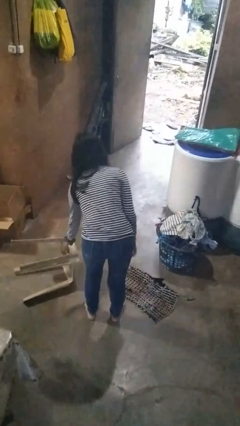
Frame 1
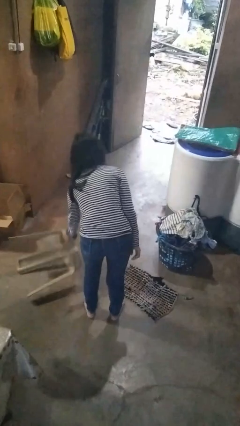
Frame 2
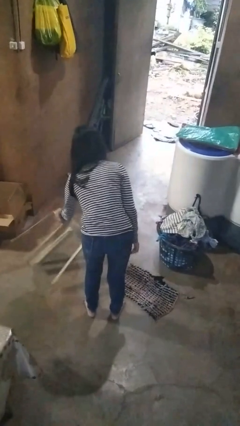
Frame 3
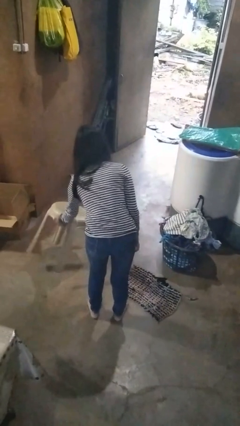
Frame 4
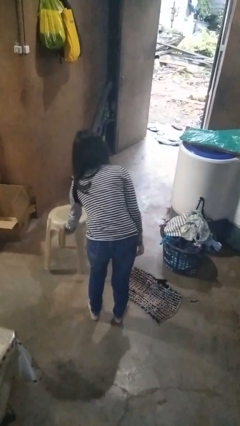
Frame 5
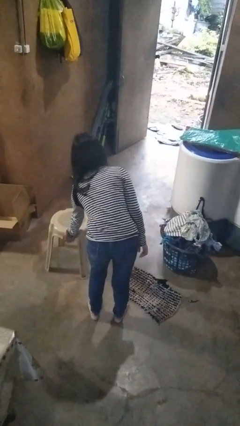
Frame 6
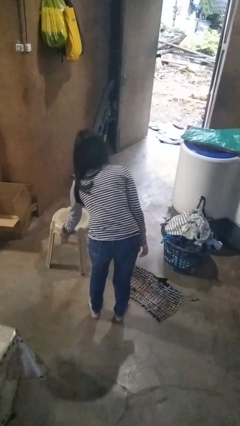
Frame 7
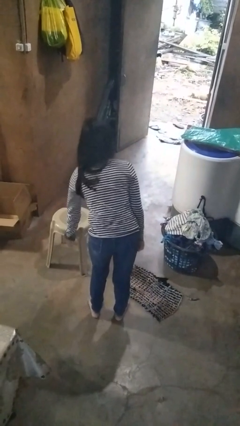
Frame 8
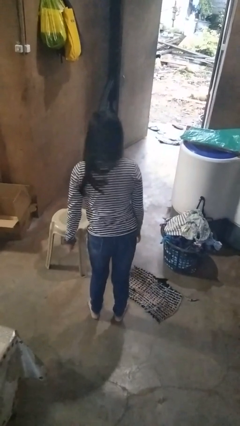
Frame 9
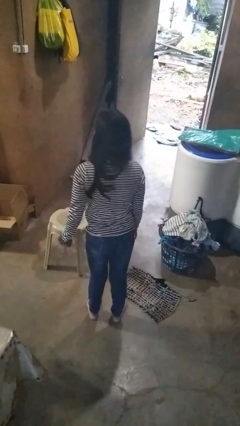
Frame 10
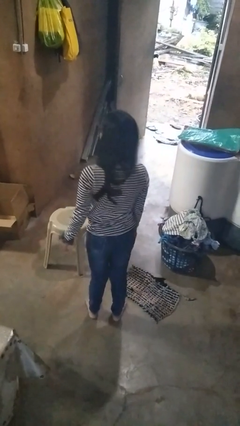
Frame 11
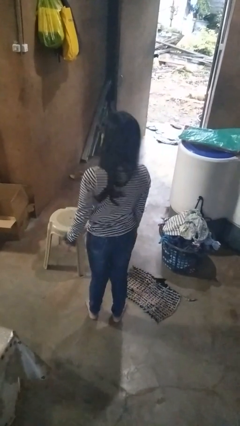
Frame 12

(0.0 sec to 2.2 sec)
person sets upright furniture

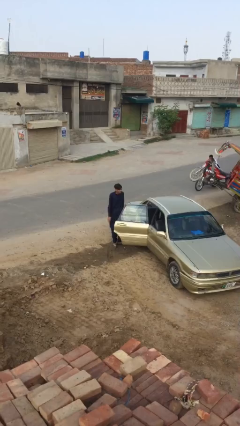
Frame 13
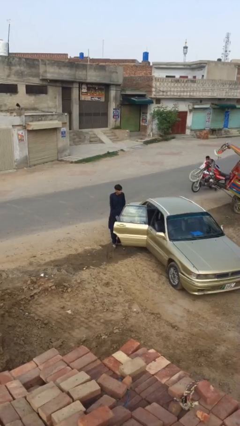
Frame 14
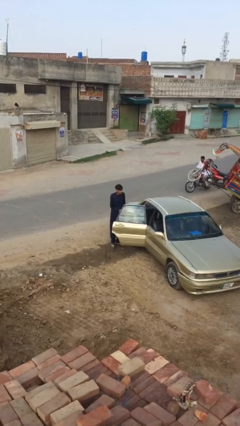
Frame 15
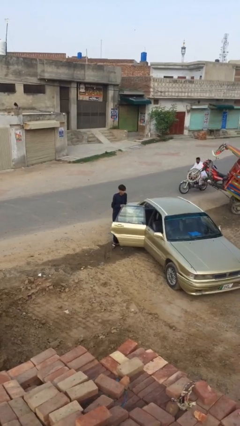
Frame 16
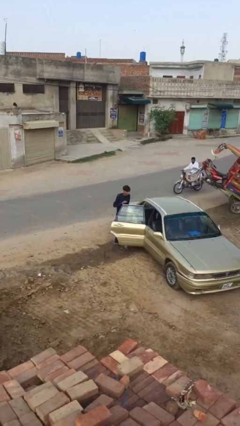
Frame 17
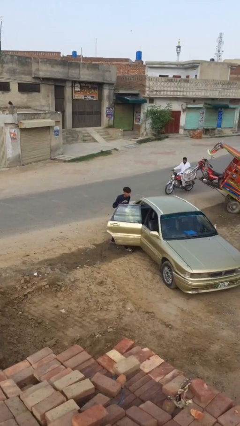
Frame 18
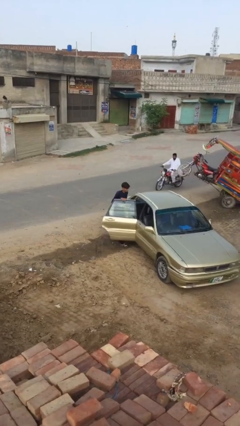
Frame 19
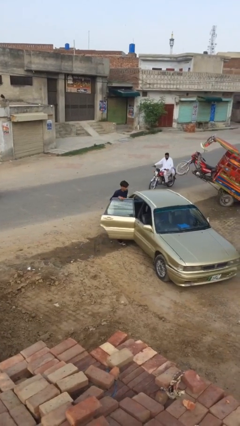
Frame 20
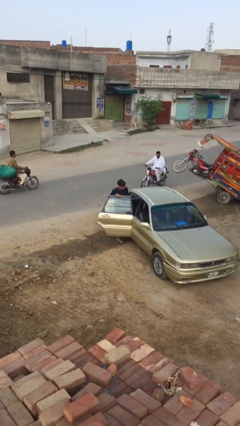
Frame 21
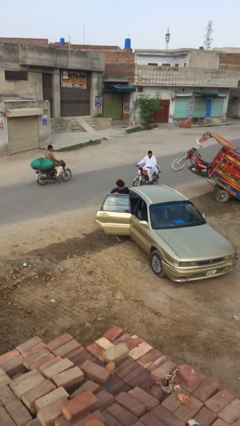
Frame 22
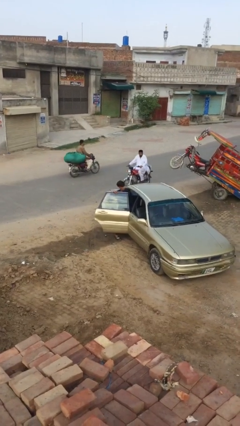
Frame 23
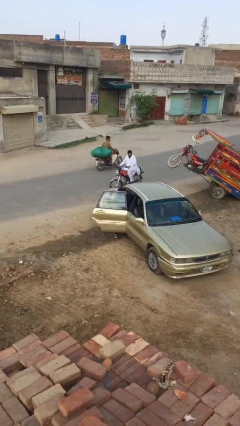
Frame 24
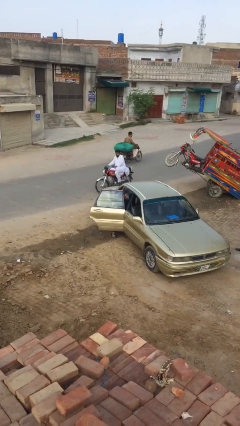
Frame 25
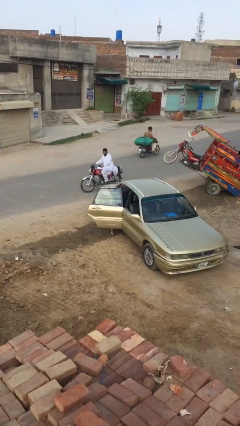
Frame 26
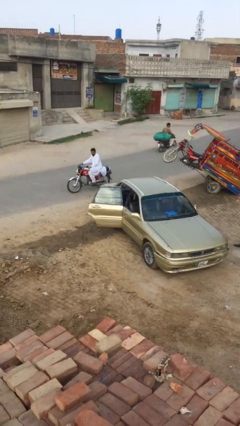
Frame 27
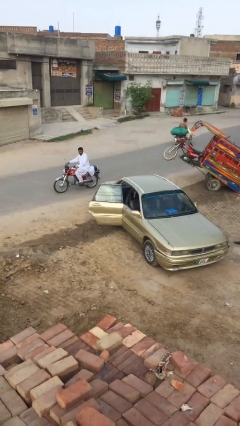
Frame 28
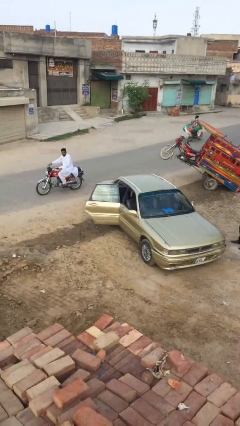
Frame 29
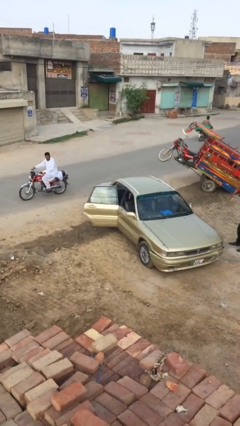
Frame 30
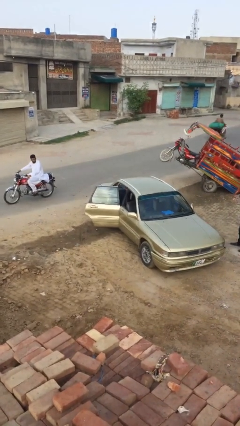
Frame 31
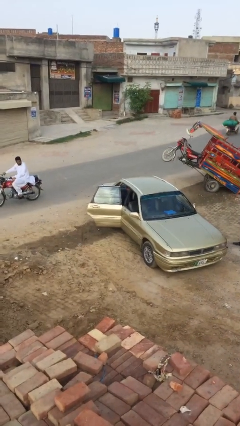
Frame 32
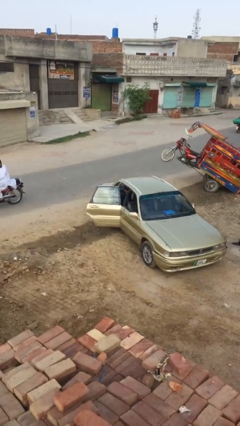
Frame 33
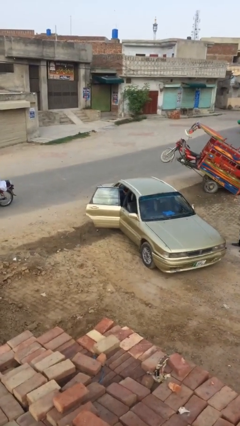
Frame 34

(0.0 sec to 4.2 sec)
person enters car

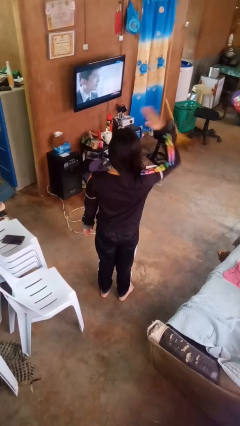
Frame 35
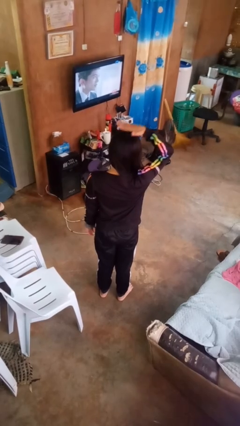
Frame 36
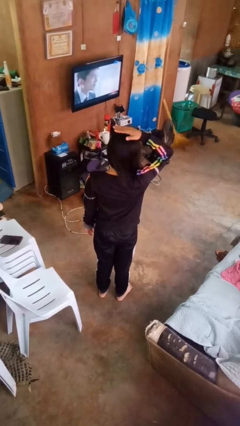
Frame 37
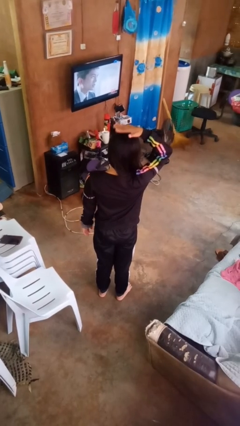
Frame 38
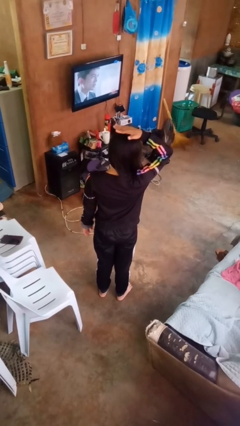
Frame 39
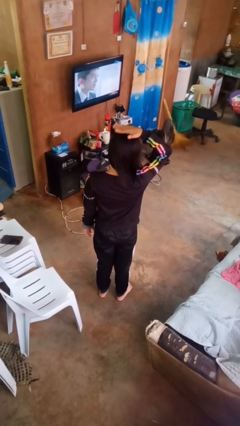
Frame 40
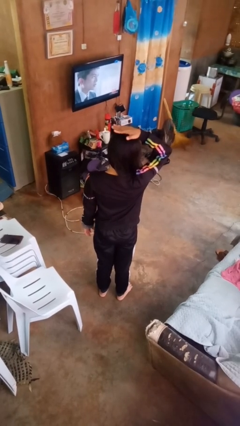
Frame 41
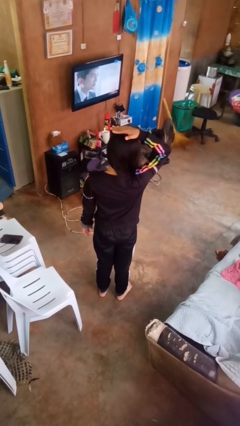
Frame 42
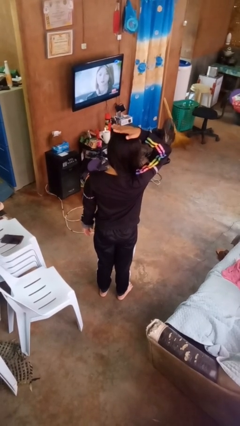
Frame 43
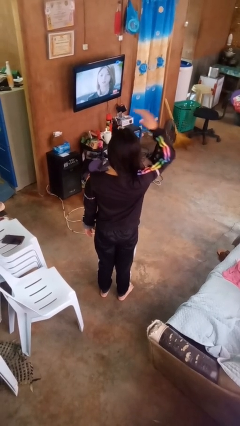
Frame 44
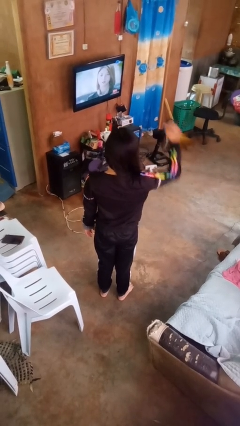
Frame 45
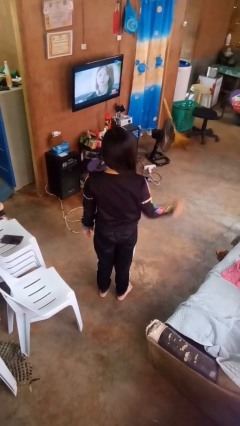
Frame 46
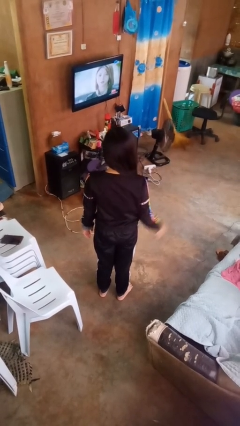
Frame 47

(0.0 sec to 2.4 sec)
person pats head

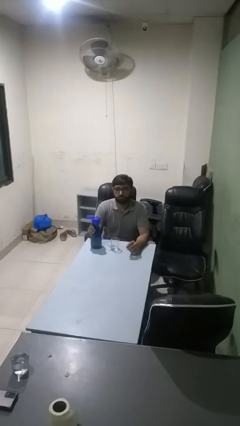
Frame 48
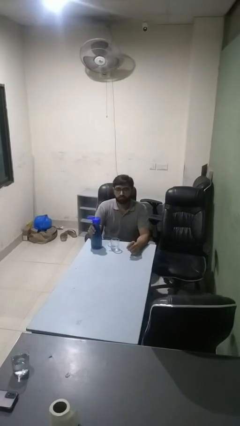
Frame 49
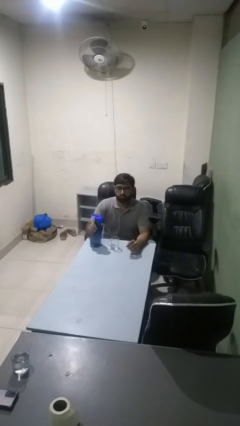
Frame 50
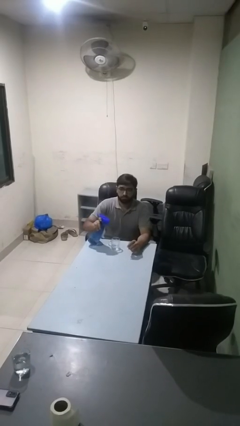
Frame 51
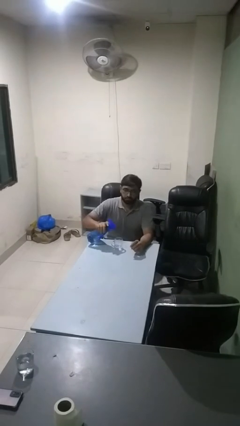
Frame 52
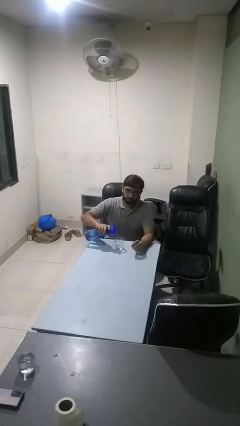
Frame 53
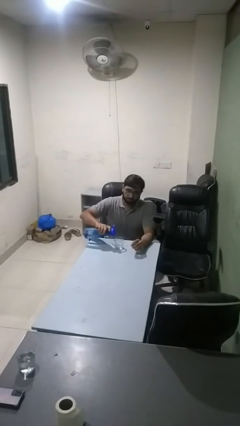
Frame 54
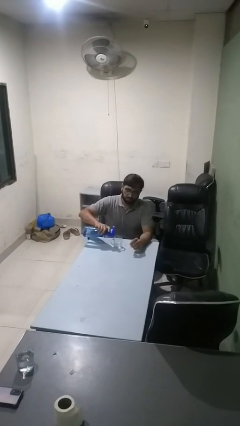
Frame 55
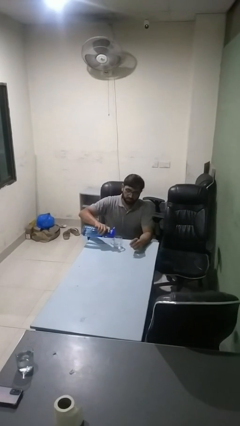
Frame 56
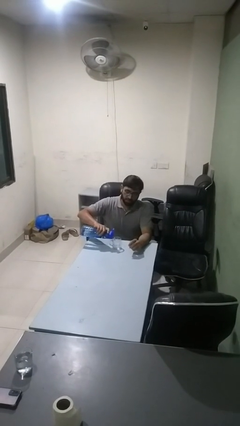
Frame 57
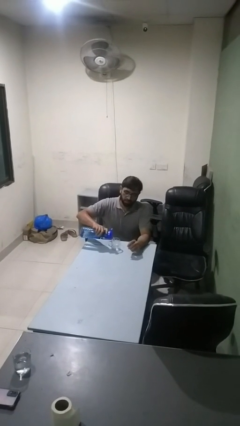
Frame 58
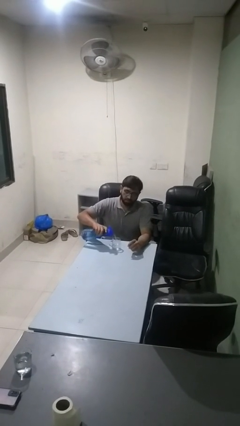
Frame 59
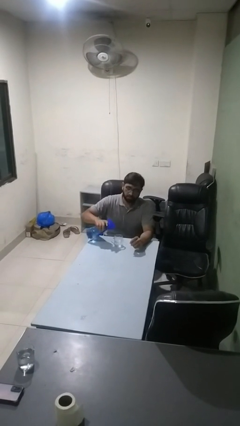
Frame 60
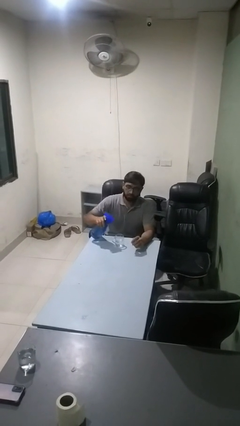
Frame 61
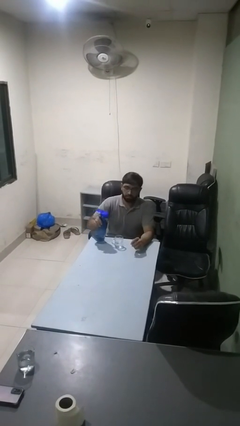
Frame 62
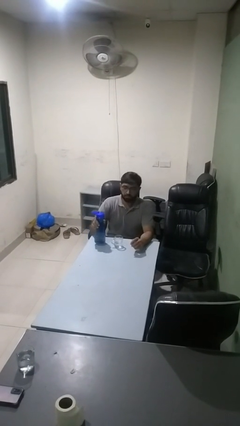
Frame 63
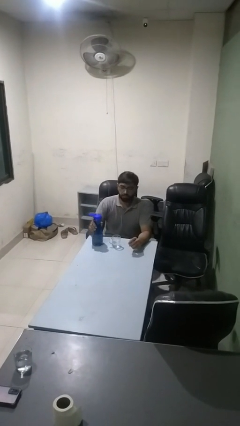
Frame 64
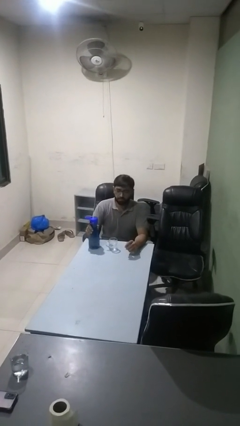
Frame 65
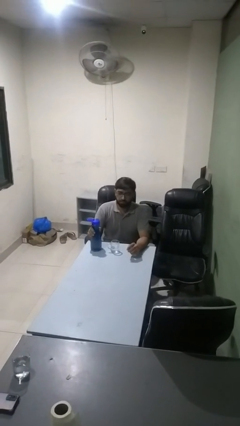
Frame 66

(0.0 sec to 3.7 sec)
person pours liquid into cup

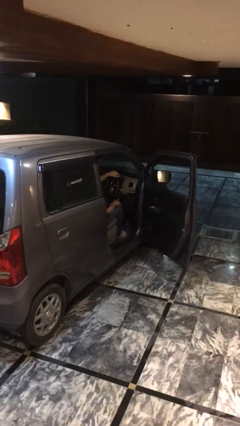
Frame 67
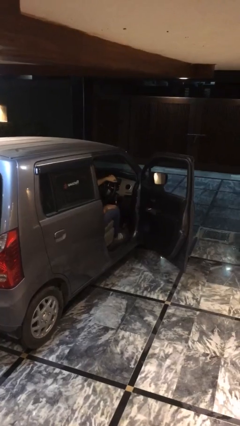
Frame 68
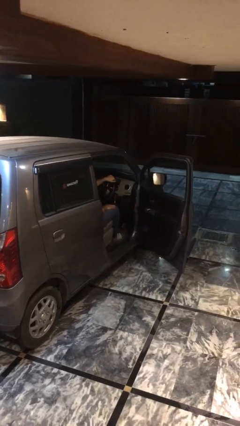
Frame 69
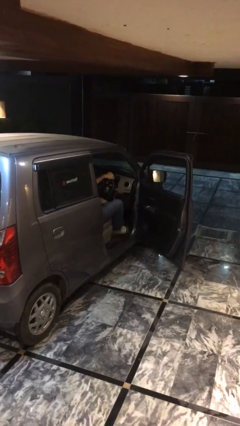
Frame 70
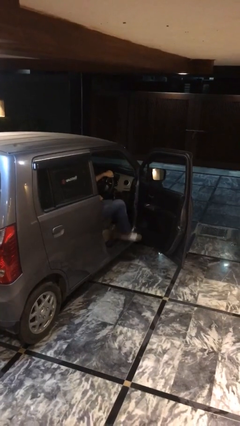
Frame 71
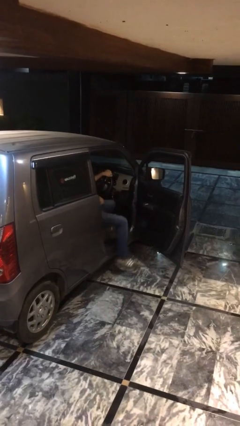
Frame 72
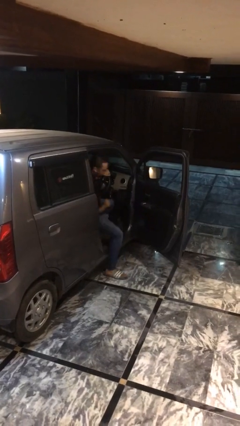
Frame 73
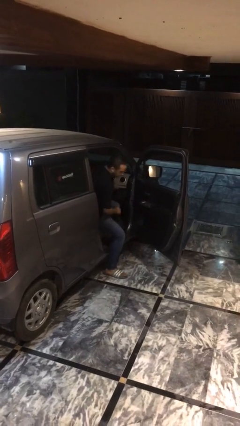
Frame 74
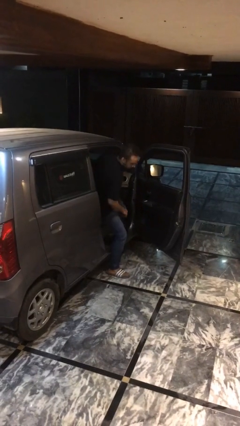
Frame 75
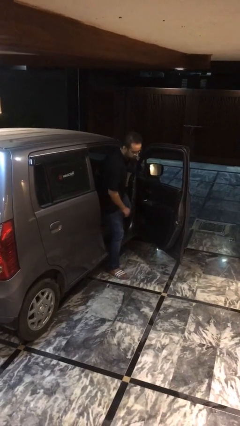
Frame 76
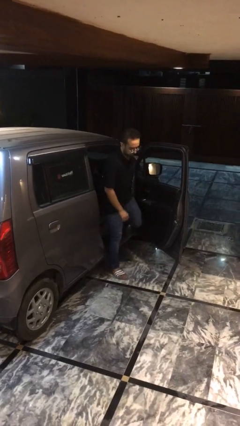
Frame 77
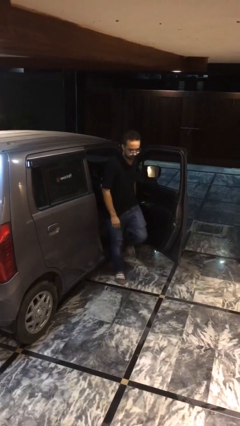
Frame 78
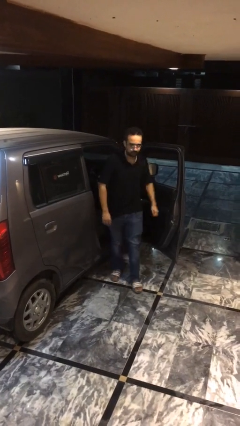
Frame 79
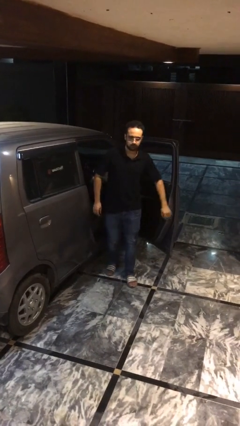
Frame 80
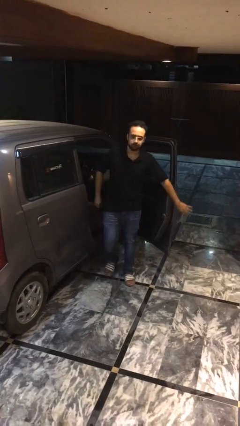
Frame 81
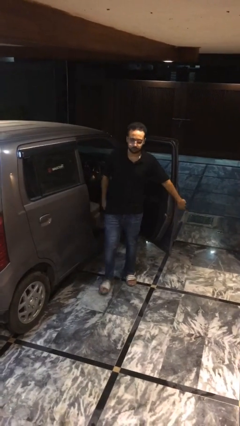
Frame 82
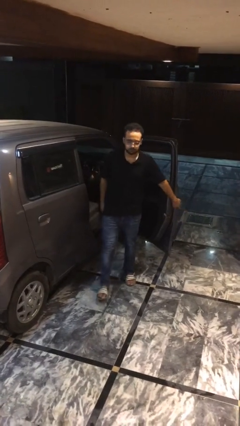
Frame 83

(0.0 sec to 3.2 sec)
person exits car

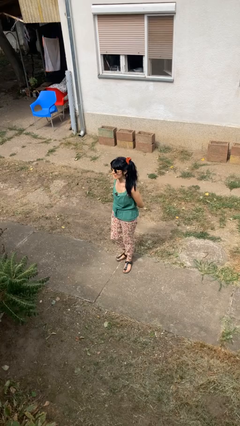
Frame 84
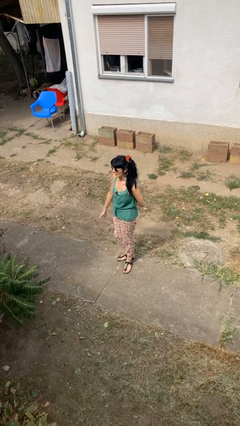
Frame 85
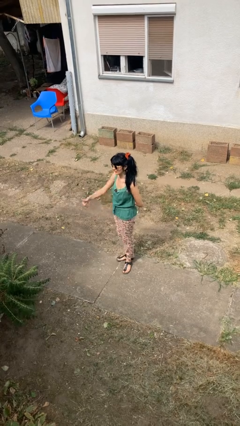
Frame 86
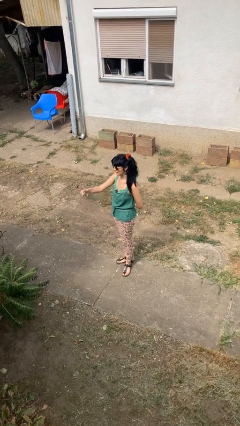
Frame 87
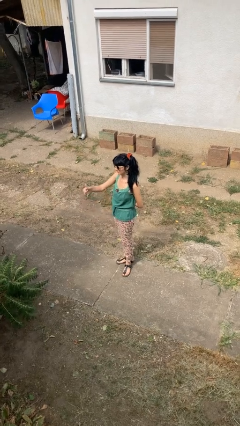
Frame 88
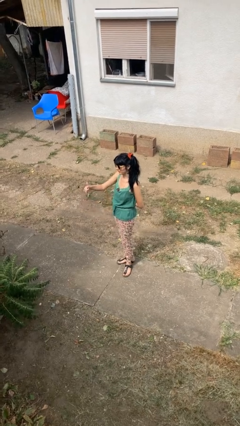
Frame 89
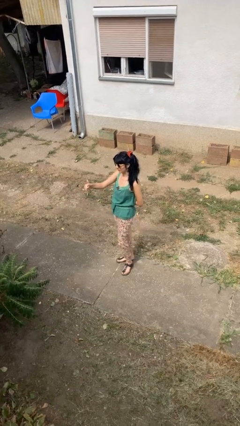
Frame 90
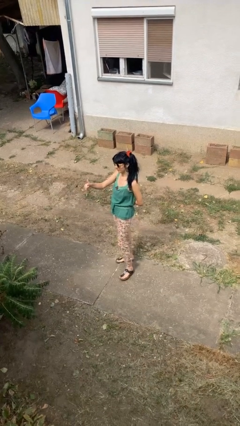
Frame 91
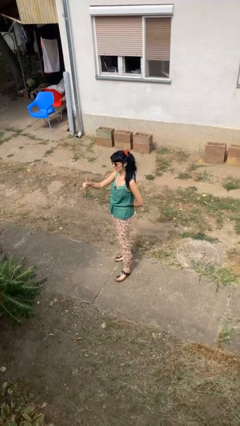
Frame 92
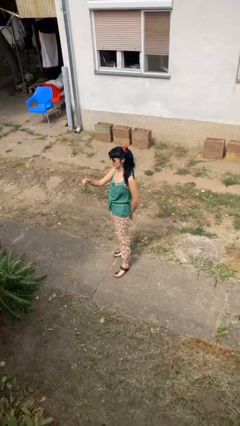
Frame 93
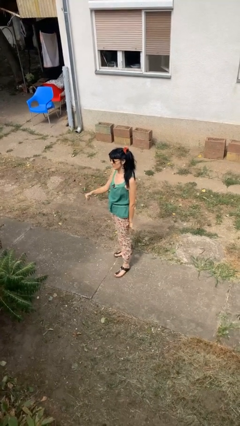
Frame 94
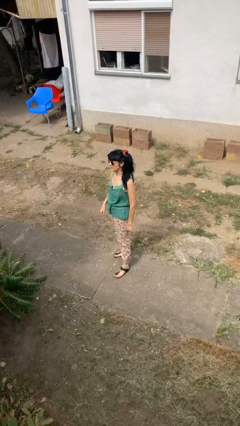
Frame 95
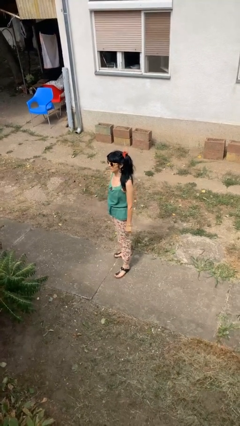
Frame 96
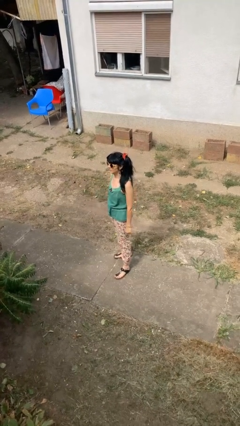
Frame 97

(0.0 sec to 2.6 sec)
person gestures thumbs up
